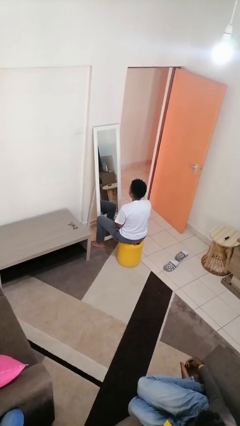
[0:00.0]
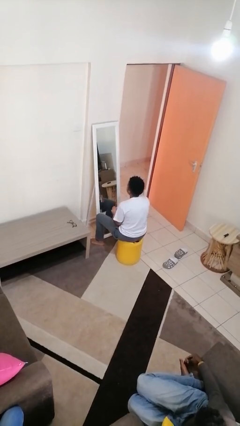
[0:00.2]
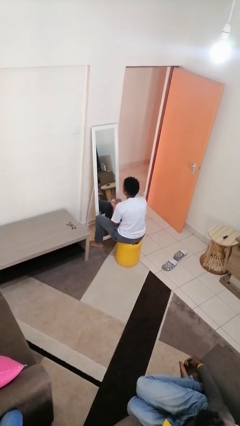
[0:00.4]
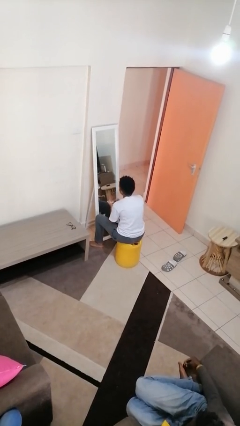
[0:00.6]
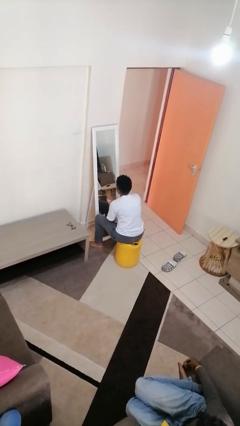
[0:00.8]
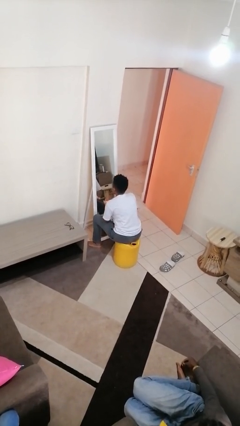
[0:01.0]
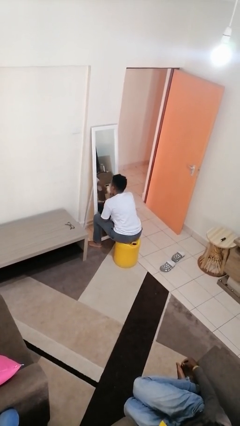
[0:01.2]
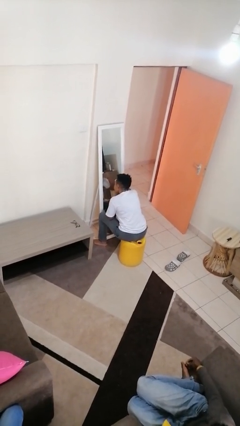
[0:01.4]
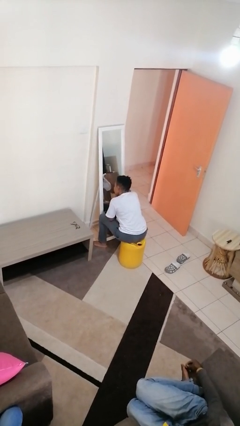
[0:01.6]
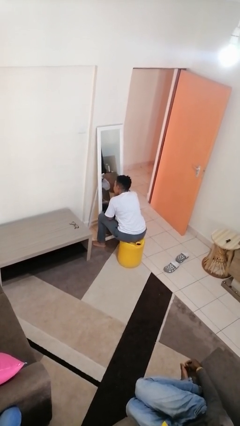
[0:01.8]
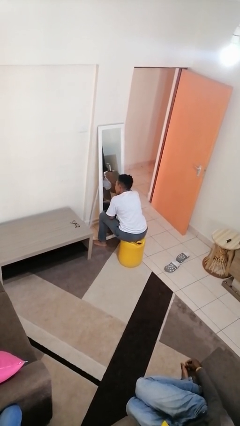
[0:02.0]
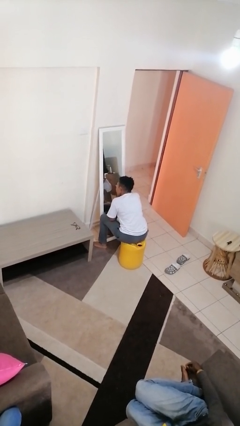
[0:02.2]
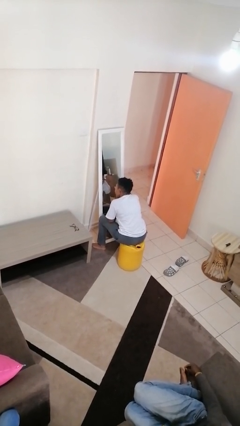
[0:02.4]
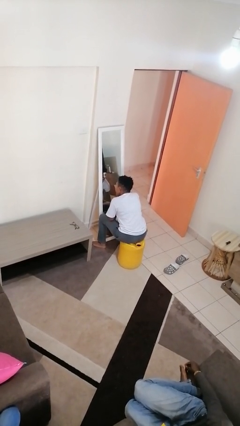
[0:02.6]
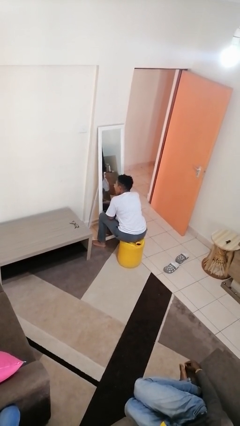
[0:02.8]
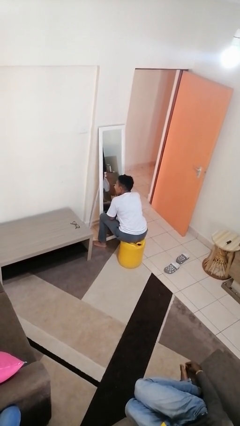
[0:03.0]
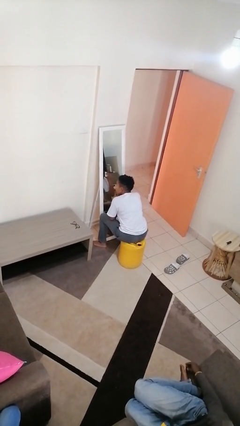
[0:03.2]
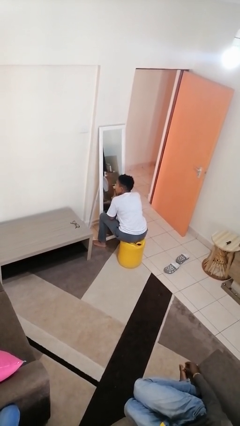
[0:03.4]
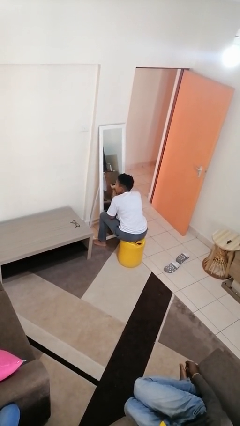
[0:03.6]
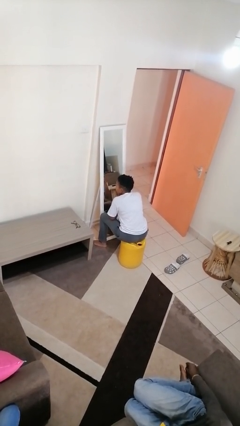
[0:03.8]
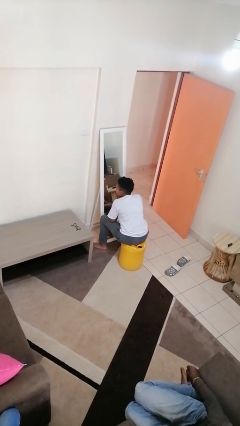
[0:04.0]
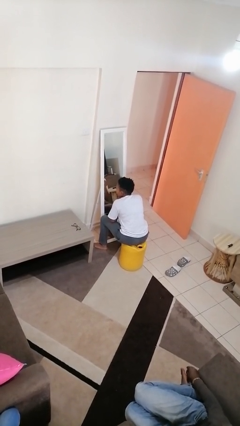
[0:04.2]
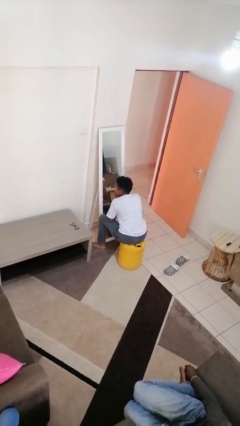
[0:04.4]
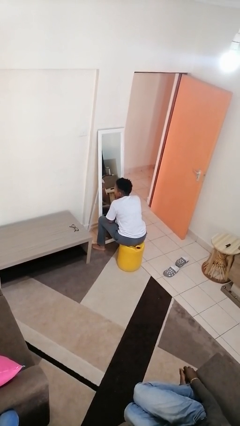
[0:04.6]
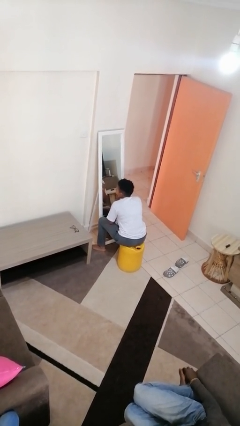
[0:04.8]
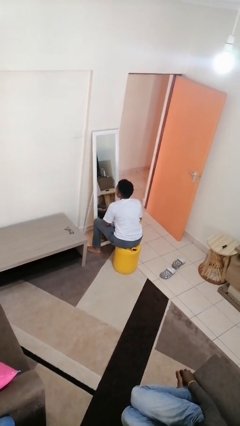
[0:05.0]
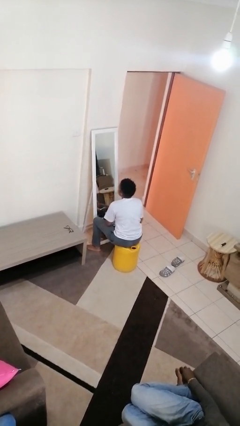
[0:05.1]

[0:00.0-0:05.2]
person applies foundation makeup

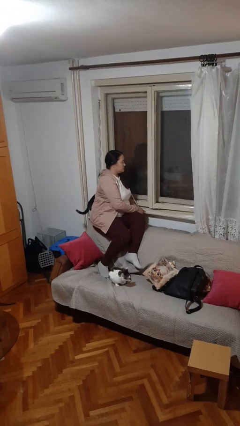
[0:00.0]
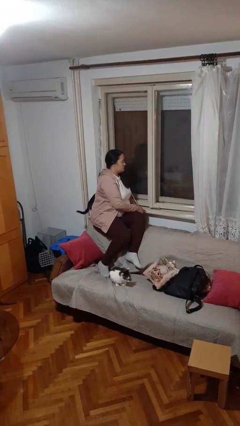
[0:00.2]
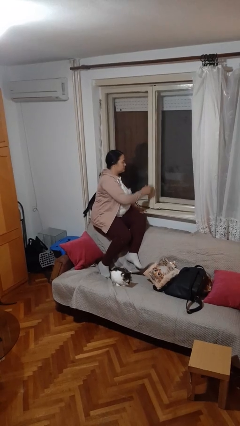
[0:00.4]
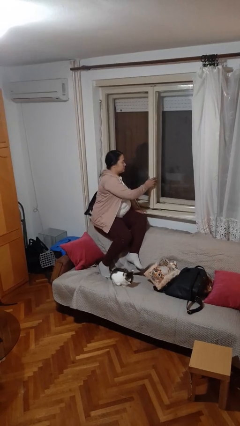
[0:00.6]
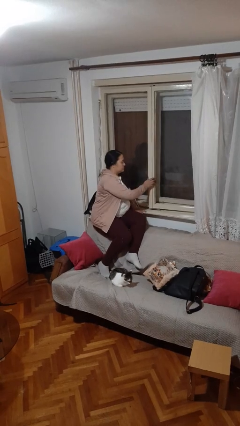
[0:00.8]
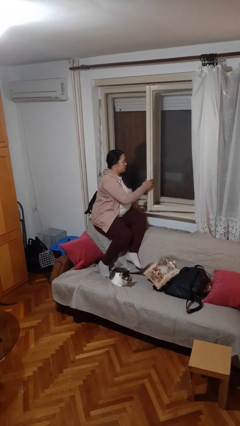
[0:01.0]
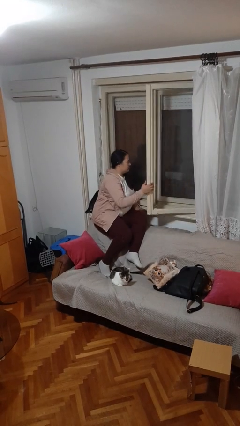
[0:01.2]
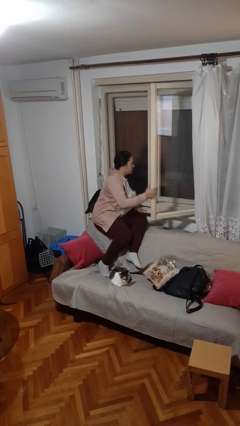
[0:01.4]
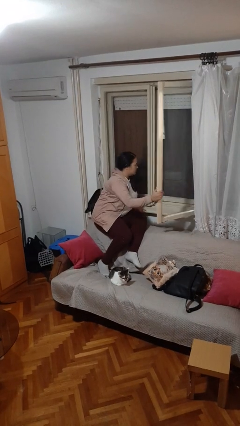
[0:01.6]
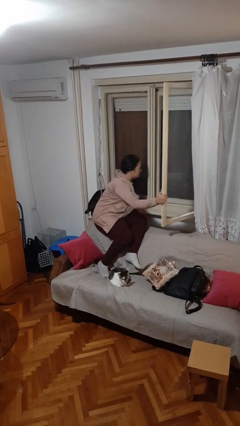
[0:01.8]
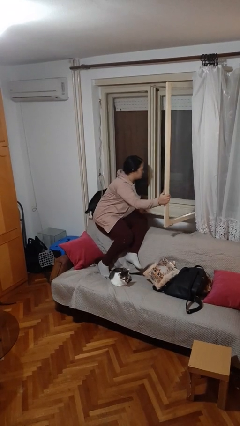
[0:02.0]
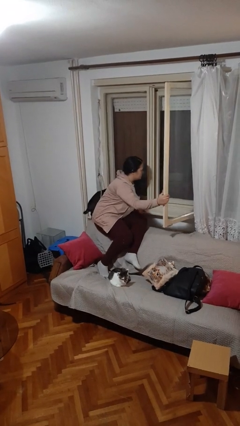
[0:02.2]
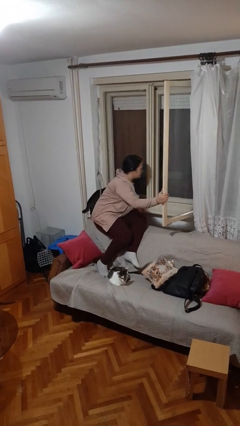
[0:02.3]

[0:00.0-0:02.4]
person opens home window

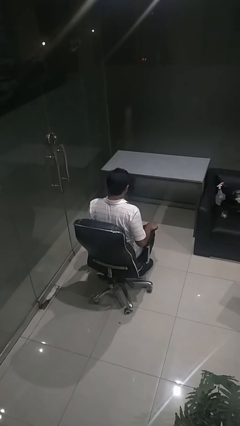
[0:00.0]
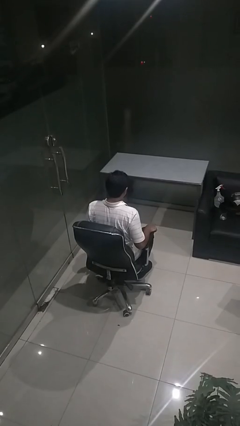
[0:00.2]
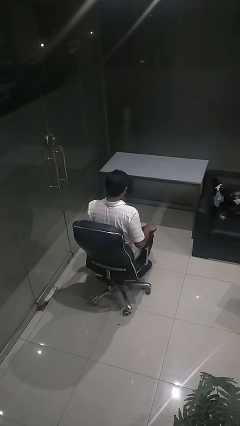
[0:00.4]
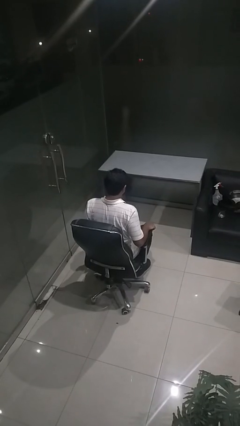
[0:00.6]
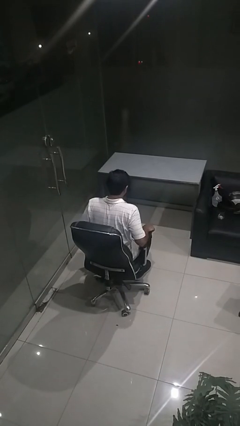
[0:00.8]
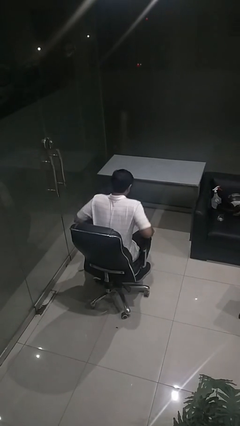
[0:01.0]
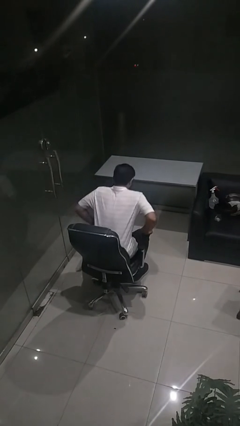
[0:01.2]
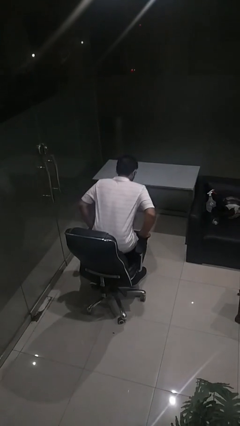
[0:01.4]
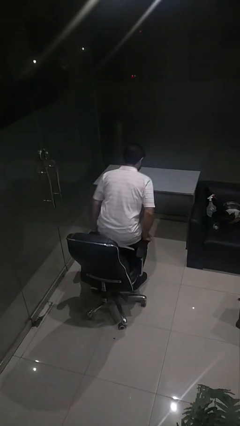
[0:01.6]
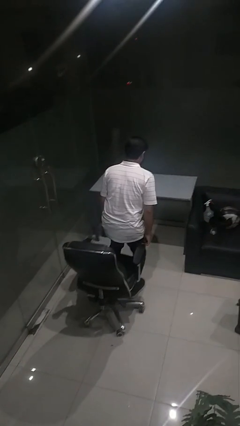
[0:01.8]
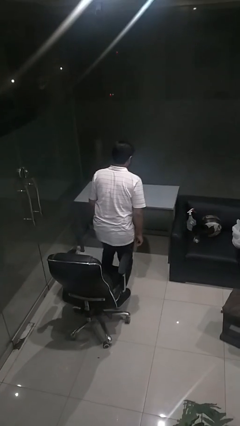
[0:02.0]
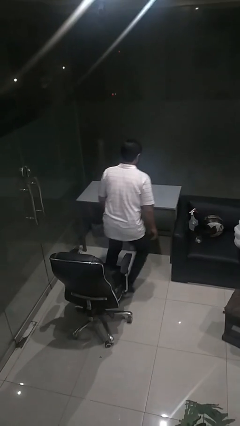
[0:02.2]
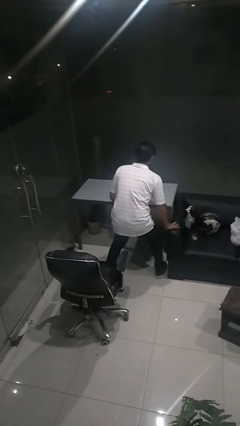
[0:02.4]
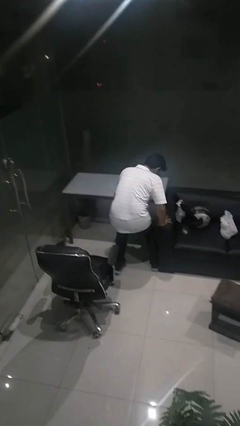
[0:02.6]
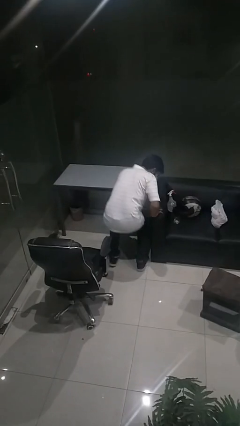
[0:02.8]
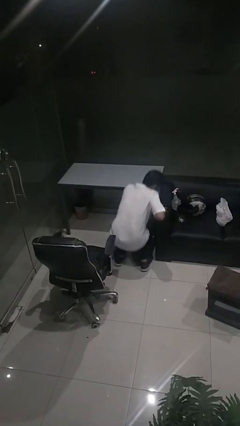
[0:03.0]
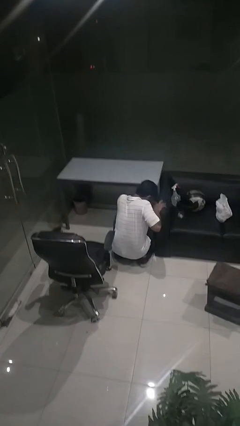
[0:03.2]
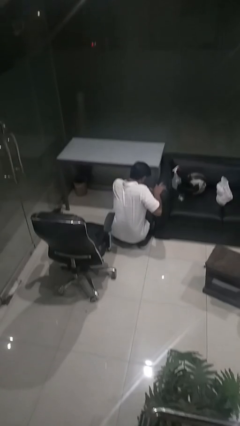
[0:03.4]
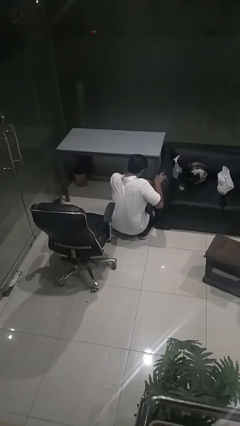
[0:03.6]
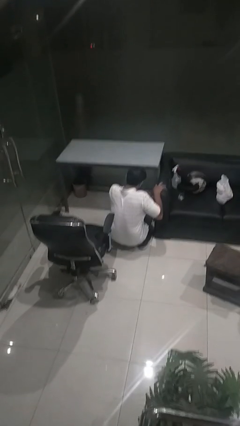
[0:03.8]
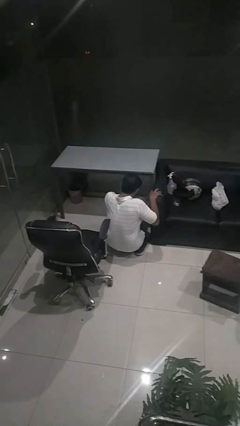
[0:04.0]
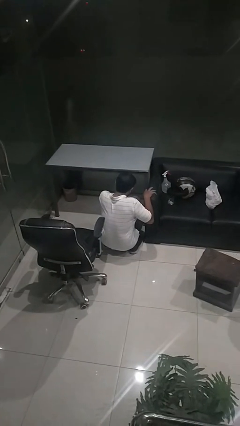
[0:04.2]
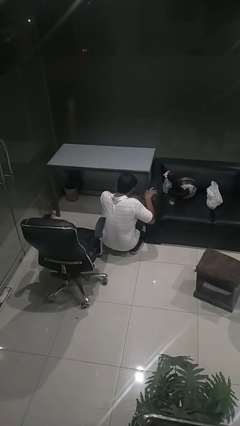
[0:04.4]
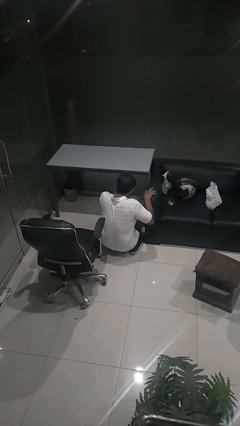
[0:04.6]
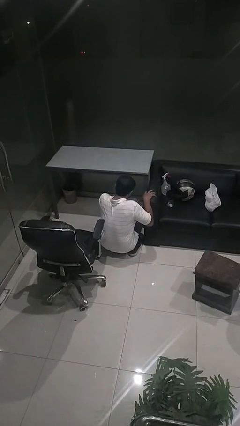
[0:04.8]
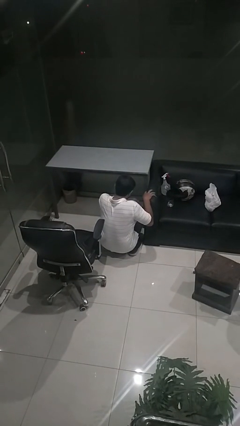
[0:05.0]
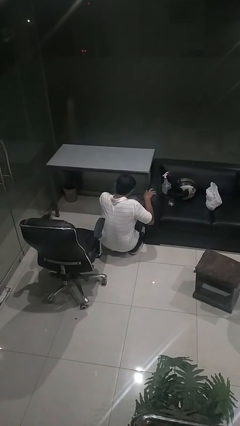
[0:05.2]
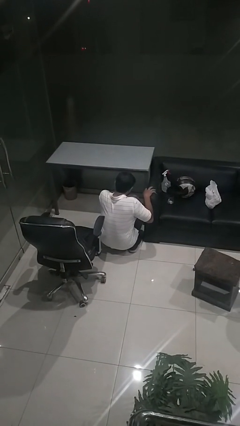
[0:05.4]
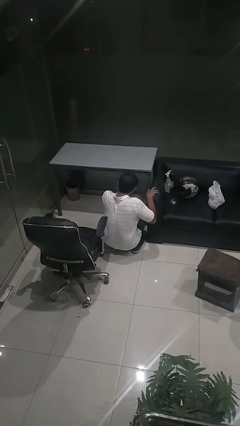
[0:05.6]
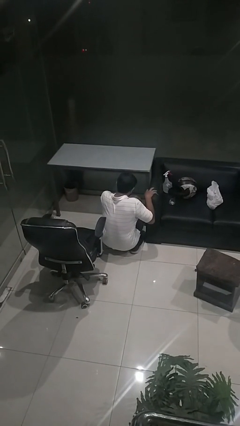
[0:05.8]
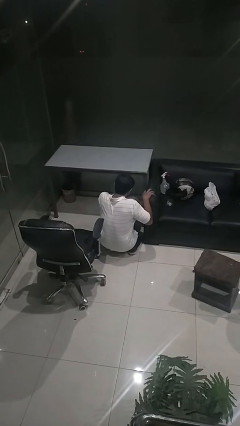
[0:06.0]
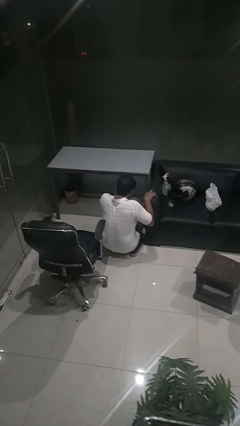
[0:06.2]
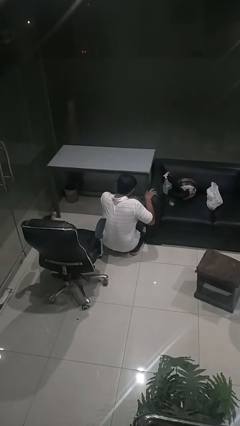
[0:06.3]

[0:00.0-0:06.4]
person falls from chair

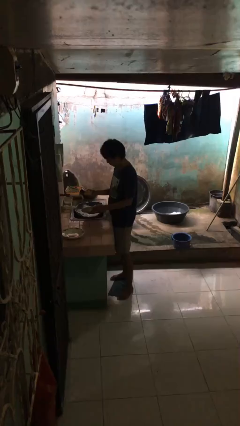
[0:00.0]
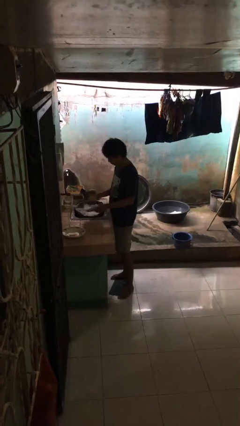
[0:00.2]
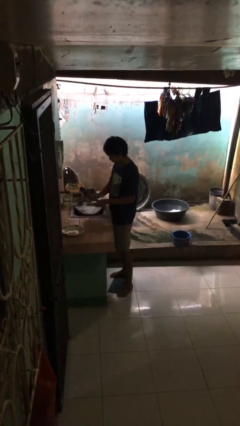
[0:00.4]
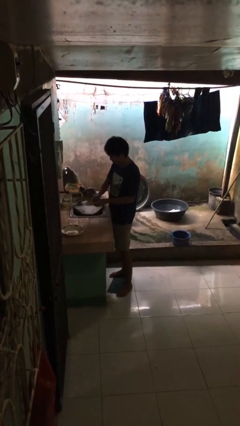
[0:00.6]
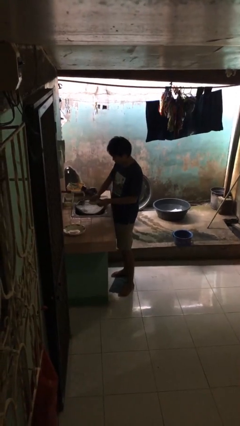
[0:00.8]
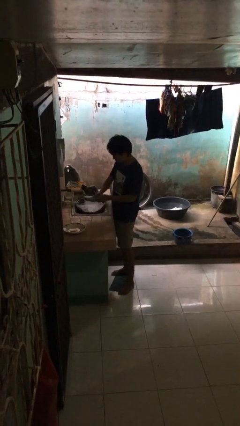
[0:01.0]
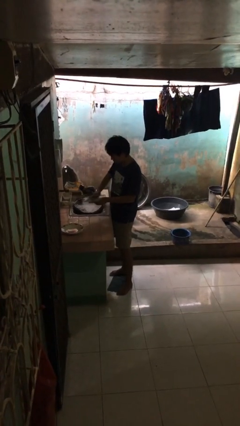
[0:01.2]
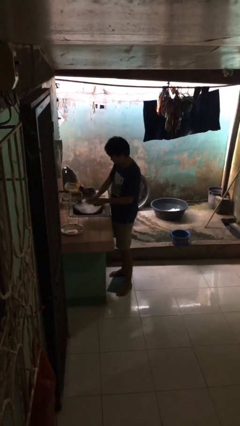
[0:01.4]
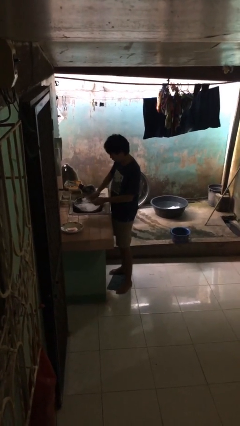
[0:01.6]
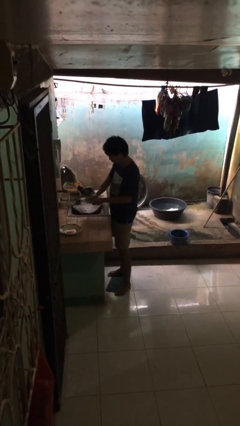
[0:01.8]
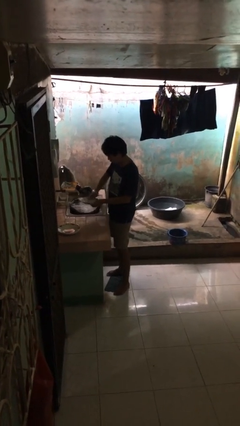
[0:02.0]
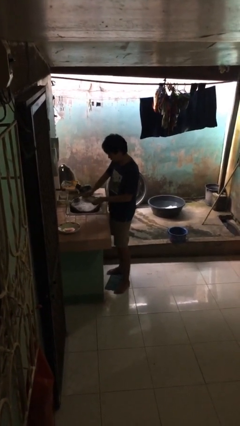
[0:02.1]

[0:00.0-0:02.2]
person washes dish

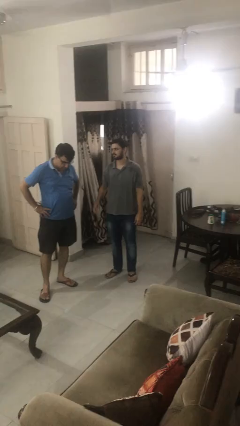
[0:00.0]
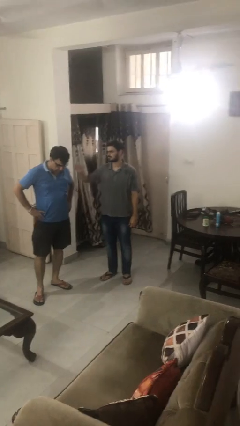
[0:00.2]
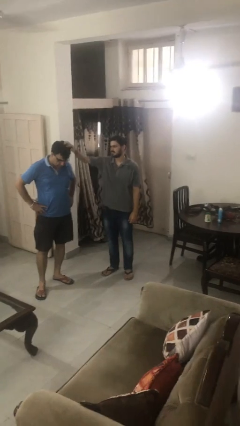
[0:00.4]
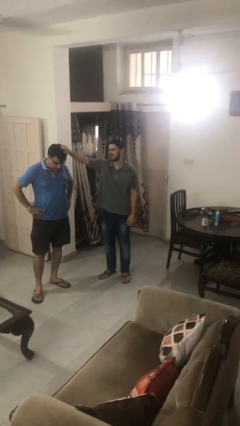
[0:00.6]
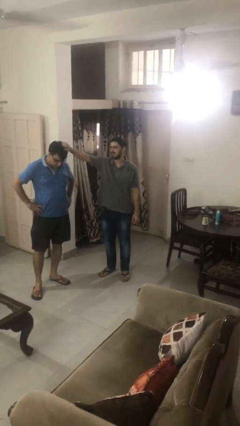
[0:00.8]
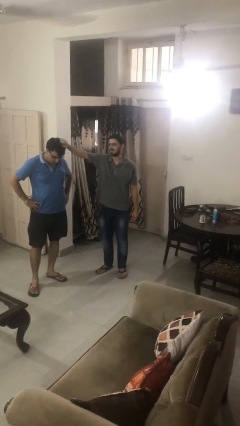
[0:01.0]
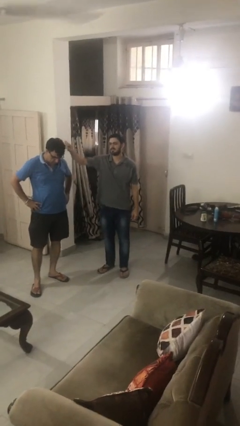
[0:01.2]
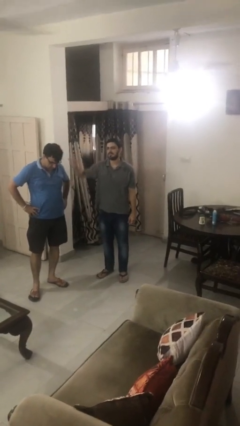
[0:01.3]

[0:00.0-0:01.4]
person grabs person by hair
